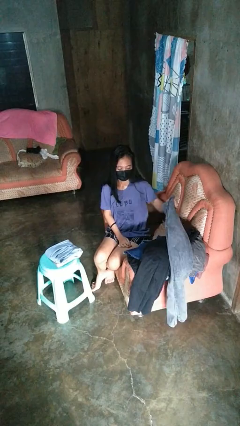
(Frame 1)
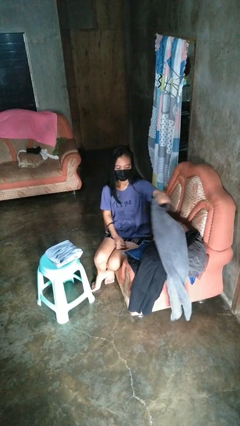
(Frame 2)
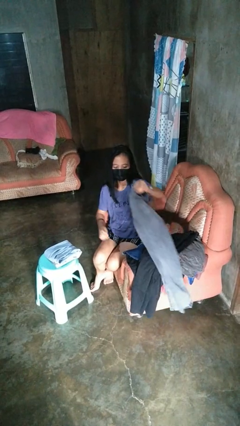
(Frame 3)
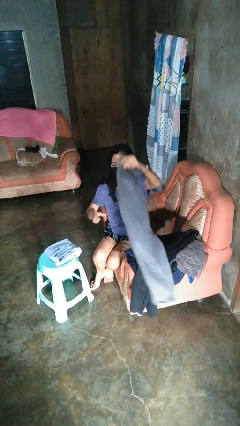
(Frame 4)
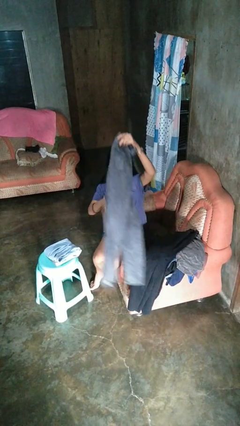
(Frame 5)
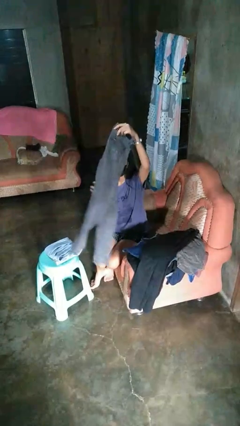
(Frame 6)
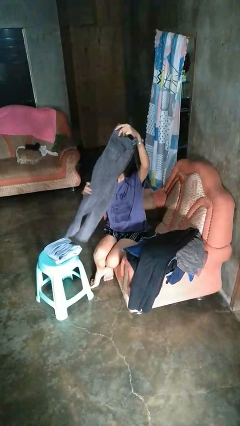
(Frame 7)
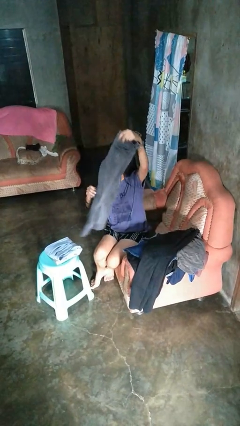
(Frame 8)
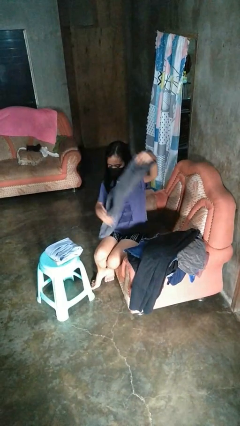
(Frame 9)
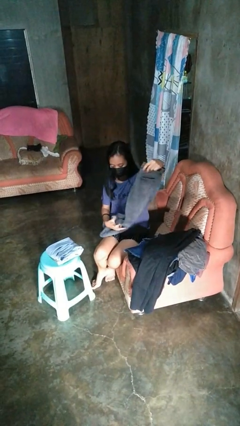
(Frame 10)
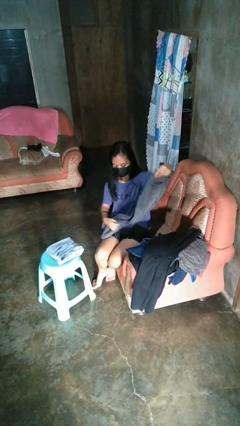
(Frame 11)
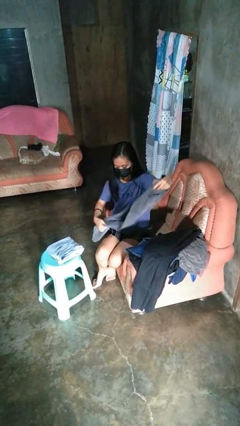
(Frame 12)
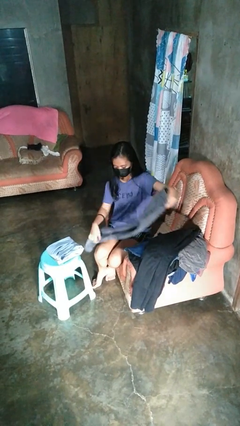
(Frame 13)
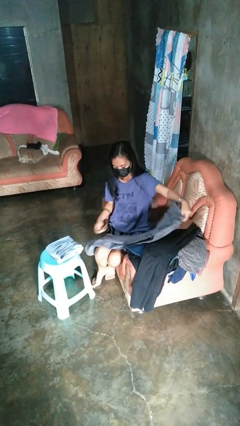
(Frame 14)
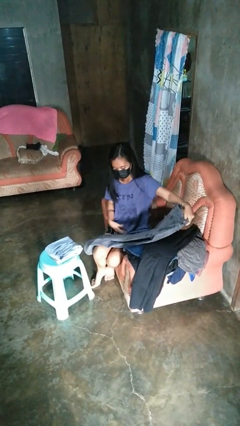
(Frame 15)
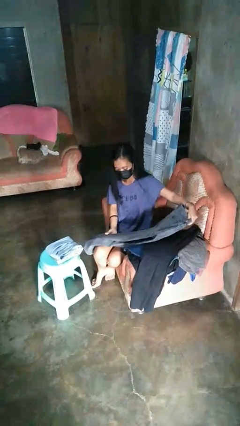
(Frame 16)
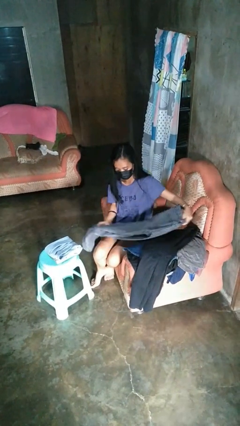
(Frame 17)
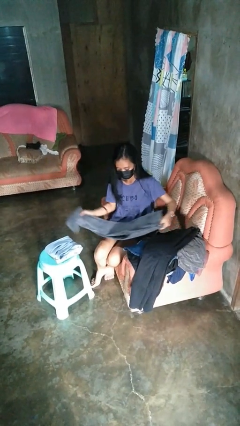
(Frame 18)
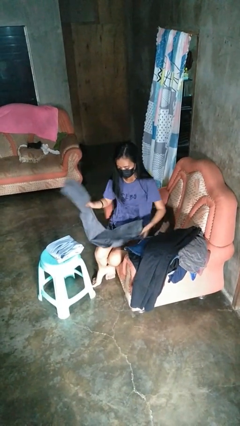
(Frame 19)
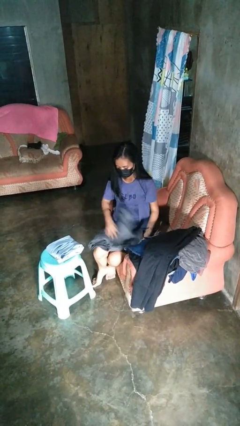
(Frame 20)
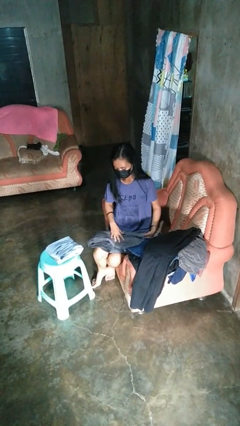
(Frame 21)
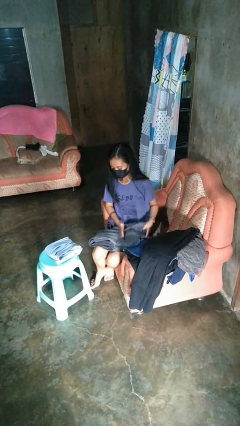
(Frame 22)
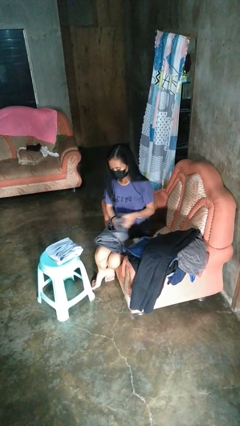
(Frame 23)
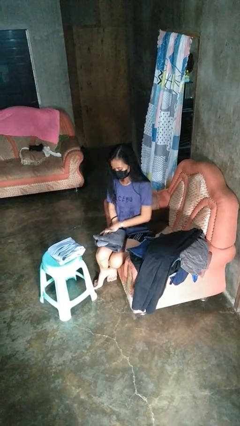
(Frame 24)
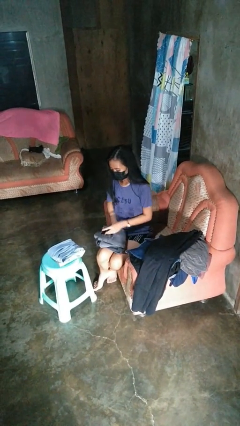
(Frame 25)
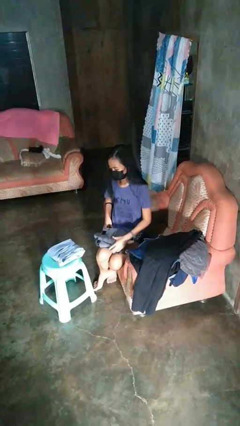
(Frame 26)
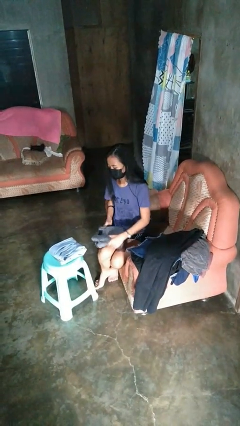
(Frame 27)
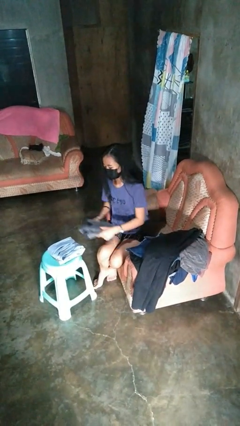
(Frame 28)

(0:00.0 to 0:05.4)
person folds pants

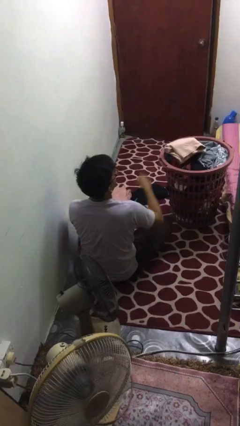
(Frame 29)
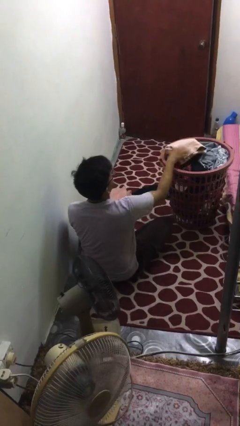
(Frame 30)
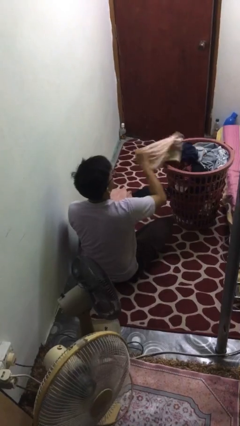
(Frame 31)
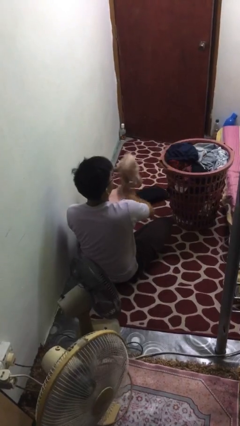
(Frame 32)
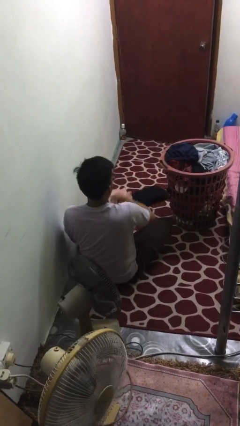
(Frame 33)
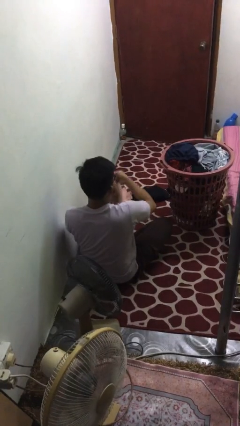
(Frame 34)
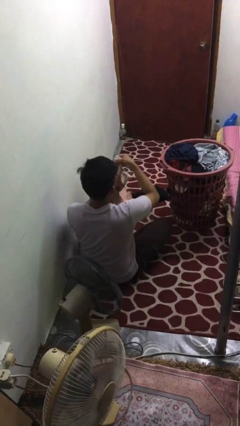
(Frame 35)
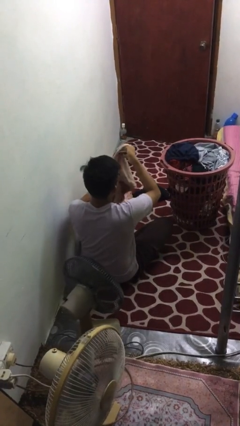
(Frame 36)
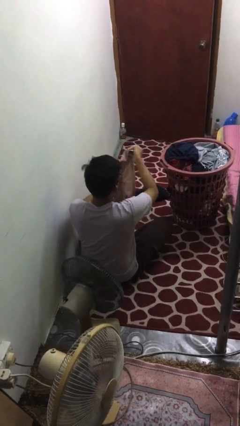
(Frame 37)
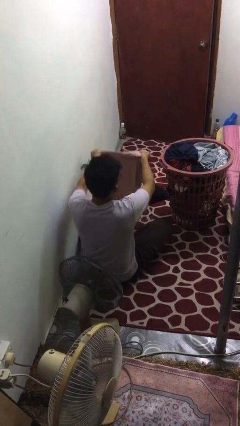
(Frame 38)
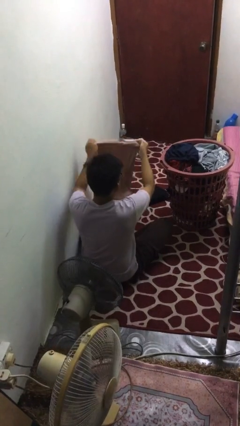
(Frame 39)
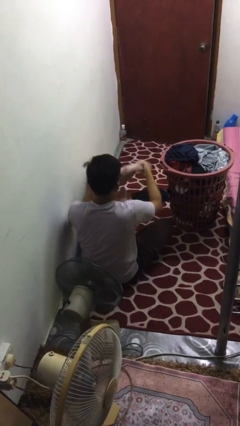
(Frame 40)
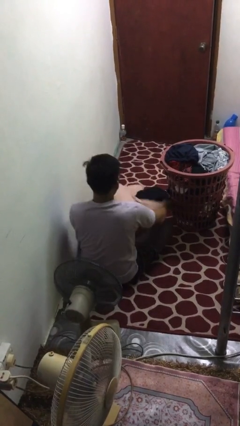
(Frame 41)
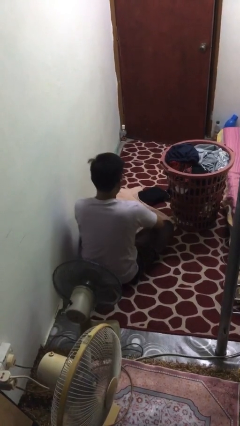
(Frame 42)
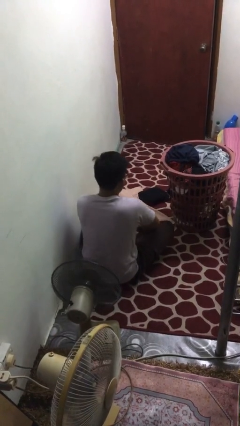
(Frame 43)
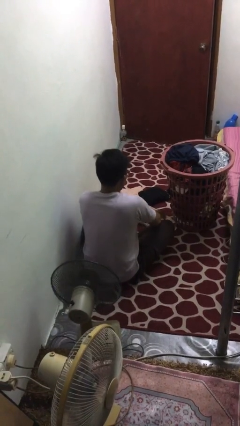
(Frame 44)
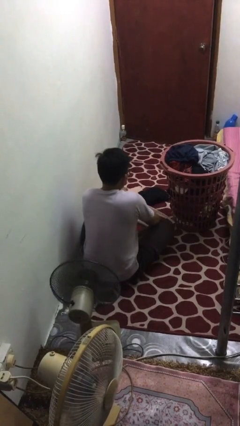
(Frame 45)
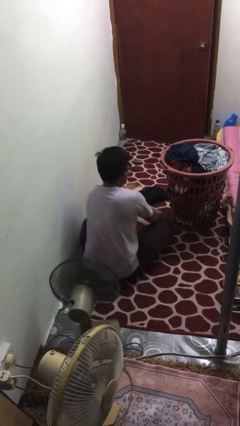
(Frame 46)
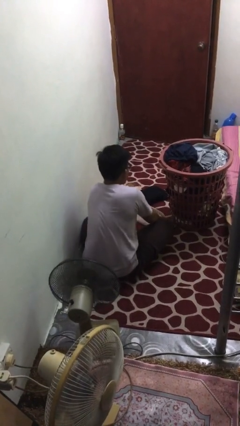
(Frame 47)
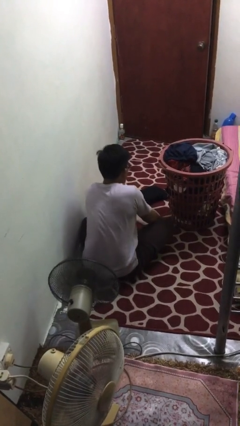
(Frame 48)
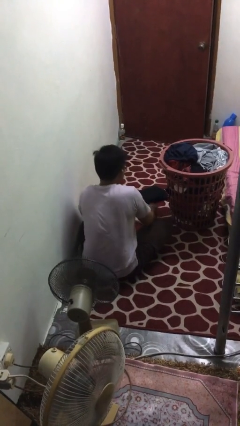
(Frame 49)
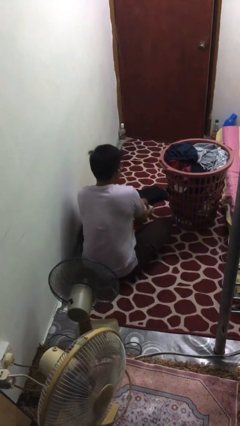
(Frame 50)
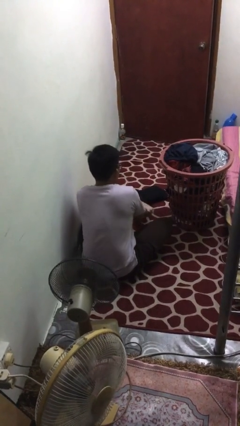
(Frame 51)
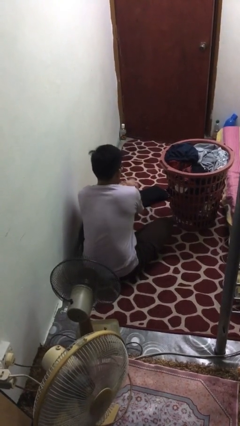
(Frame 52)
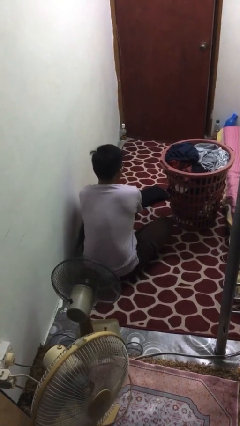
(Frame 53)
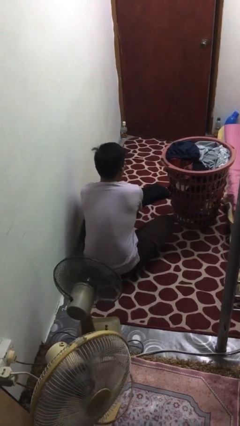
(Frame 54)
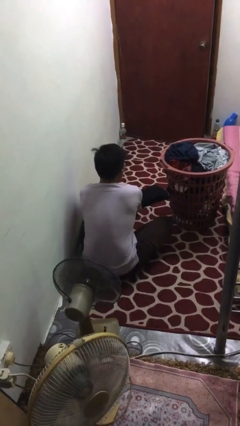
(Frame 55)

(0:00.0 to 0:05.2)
person folds shirt

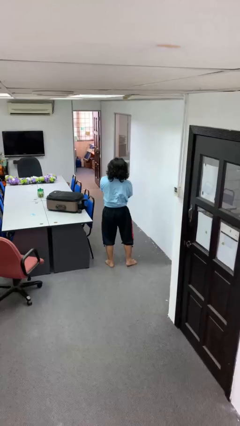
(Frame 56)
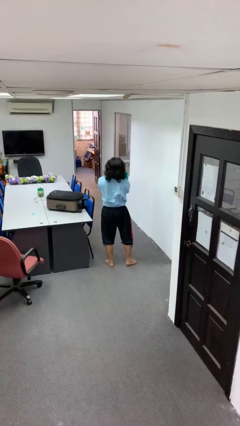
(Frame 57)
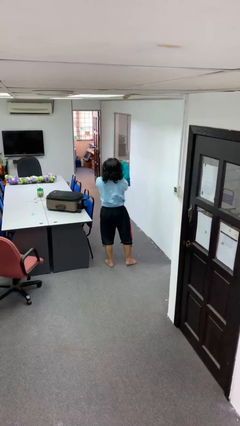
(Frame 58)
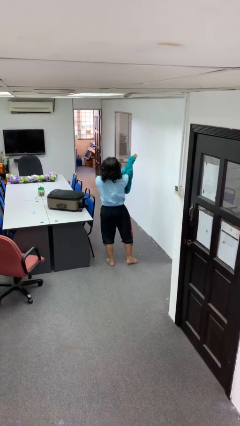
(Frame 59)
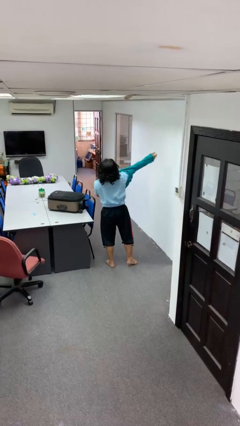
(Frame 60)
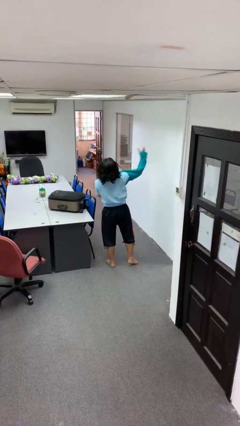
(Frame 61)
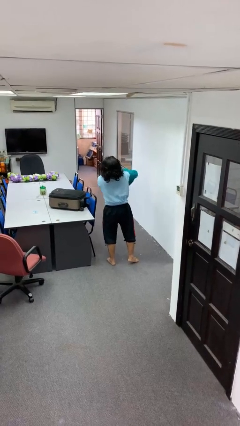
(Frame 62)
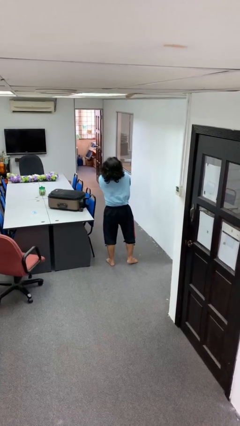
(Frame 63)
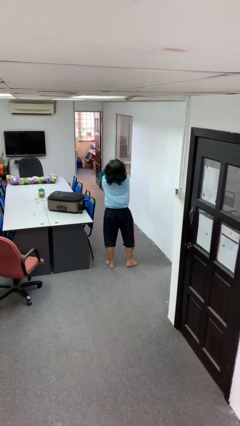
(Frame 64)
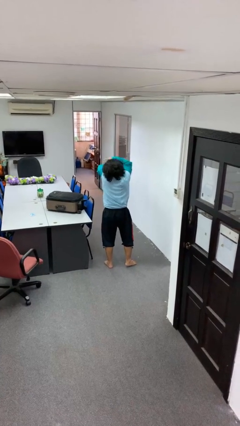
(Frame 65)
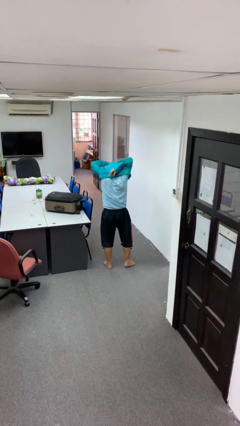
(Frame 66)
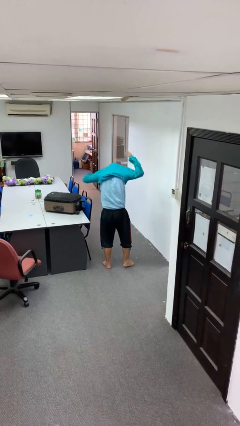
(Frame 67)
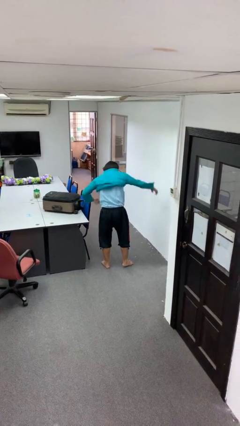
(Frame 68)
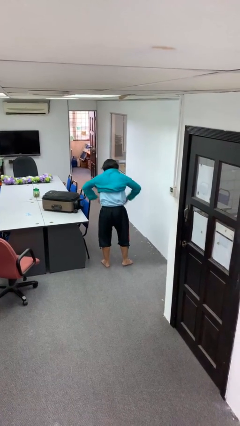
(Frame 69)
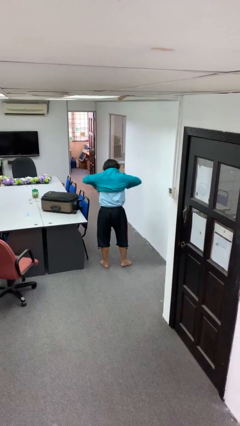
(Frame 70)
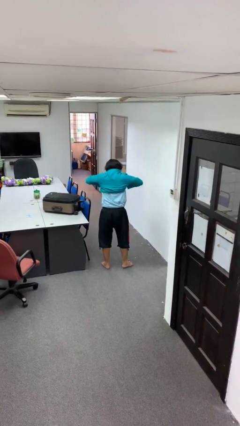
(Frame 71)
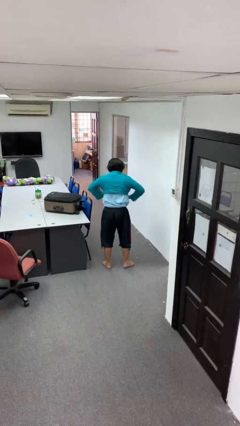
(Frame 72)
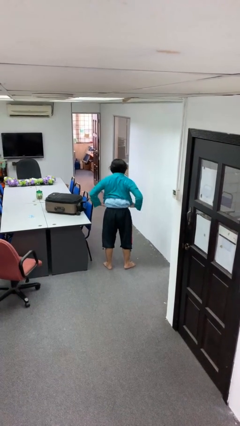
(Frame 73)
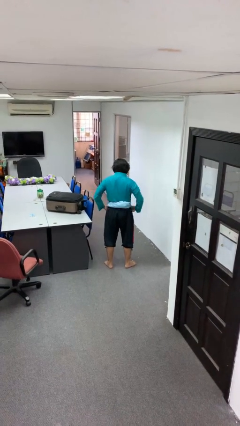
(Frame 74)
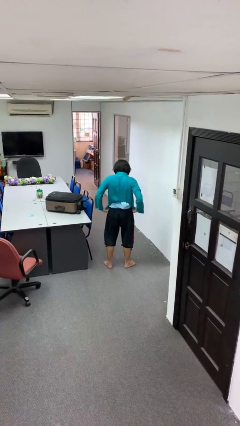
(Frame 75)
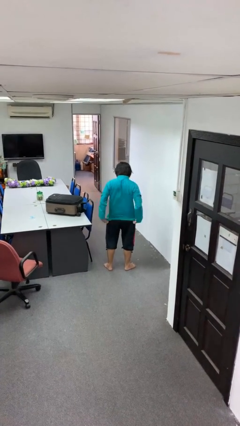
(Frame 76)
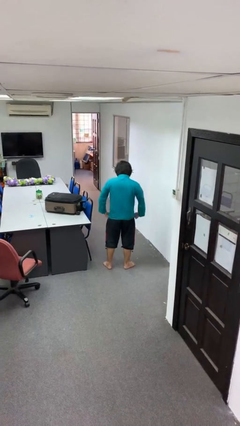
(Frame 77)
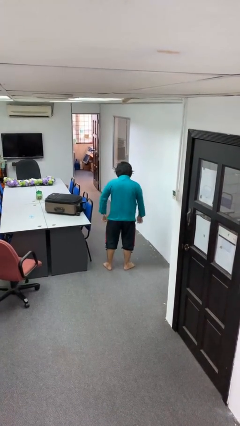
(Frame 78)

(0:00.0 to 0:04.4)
person puts on shirt

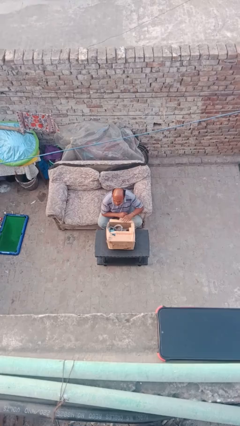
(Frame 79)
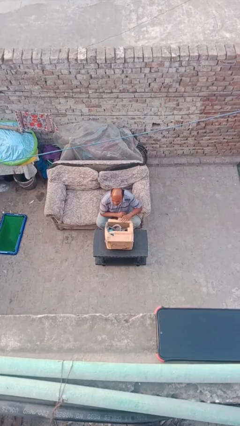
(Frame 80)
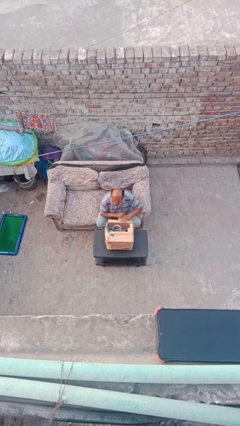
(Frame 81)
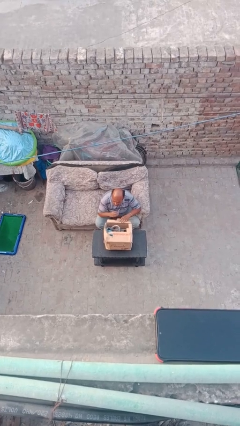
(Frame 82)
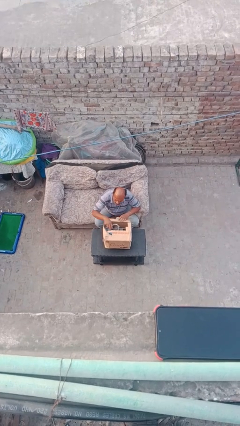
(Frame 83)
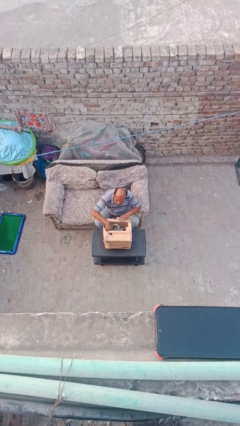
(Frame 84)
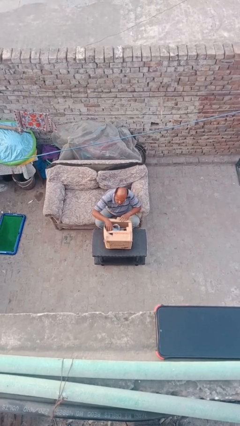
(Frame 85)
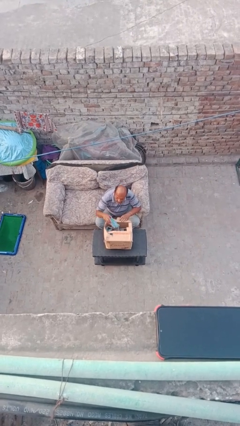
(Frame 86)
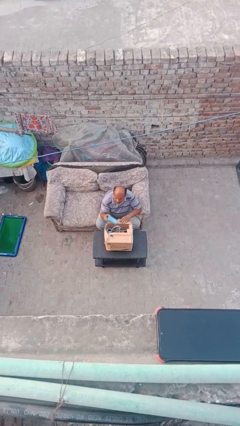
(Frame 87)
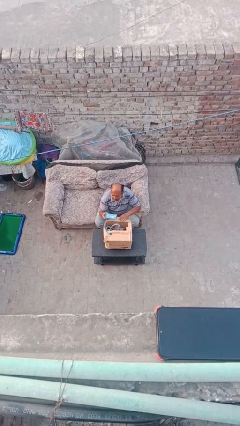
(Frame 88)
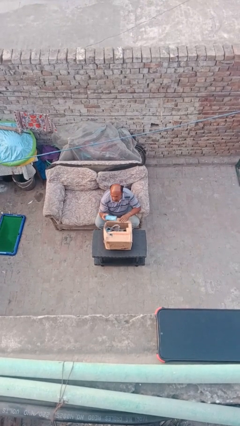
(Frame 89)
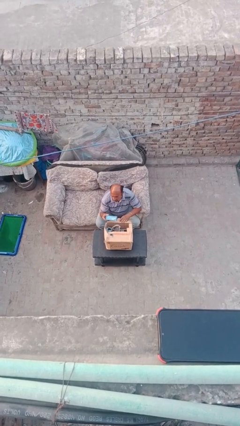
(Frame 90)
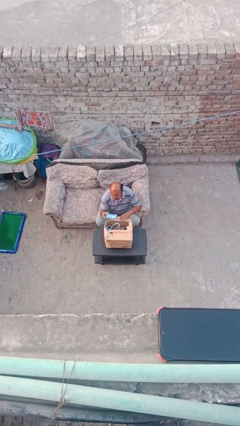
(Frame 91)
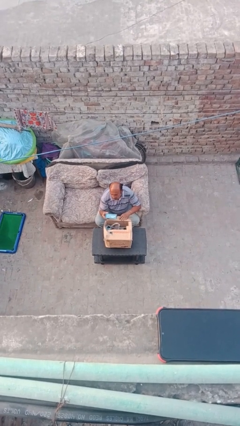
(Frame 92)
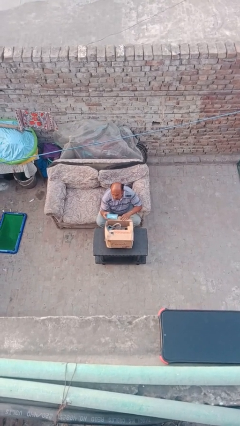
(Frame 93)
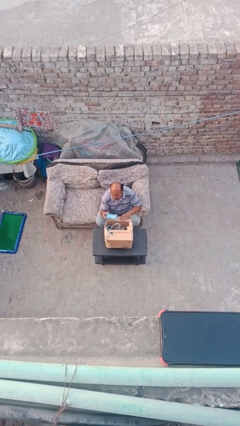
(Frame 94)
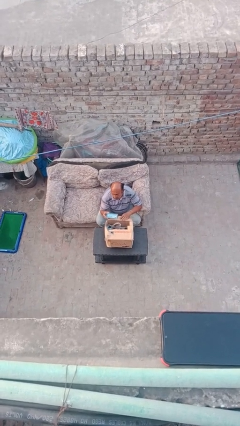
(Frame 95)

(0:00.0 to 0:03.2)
person takes object from box
